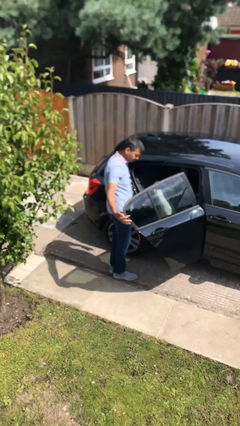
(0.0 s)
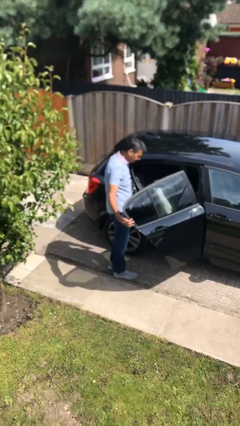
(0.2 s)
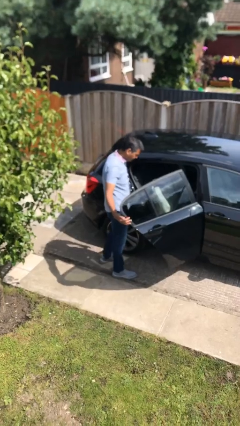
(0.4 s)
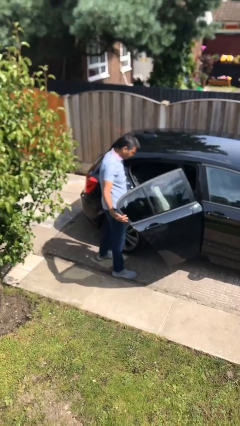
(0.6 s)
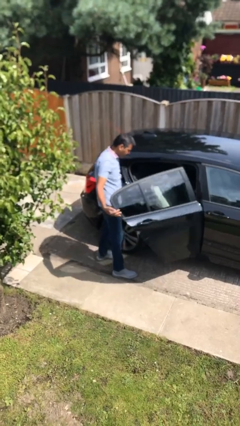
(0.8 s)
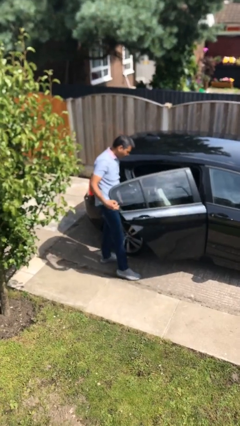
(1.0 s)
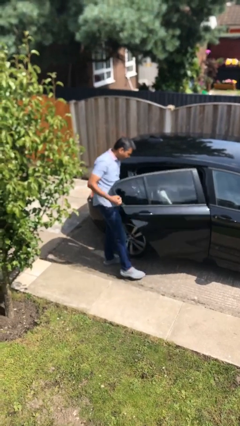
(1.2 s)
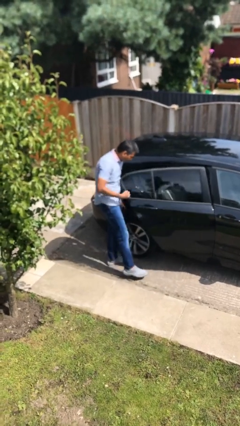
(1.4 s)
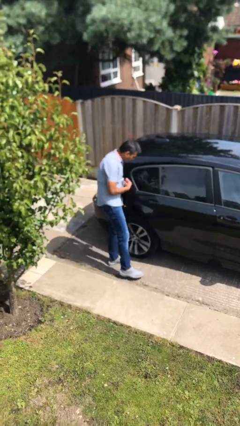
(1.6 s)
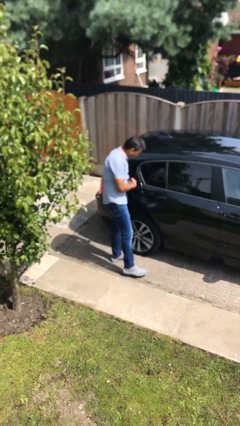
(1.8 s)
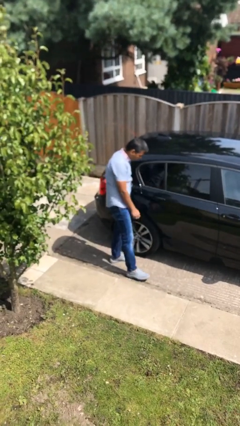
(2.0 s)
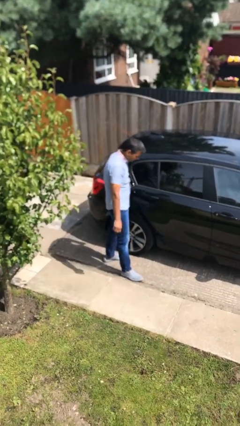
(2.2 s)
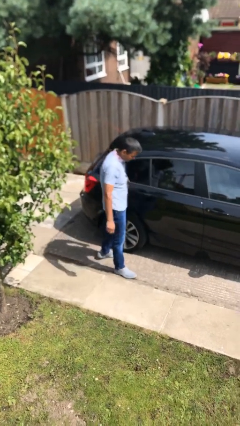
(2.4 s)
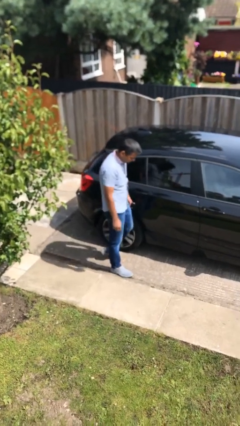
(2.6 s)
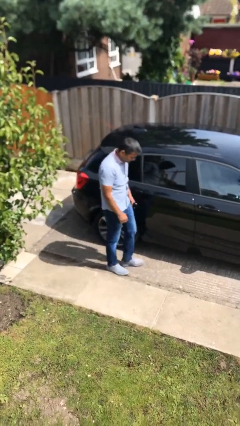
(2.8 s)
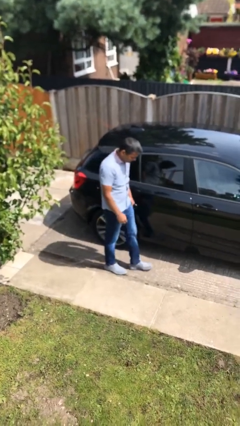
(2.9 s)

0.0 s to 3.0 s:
person closes car door

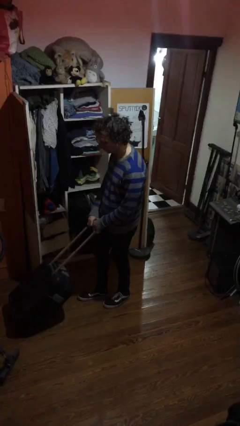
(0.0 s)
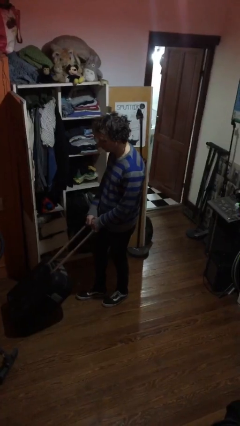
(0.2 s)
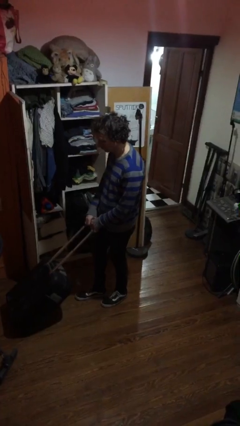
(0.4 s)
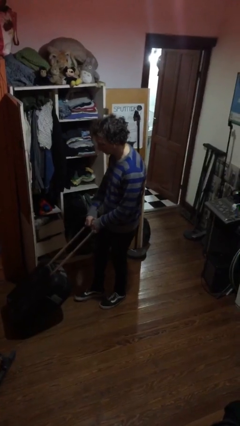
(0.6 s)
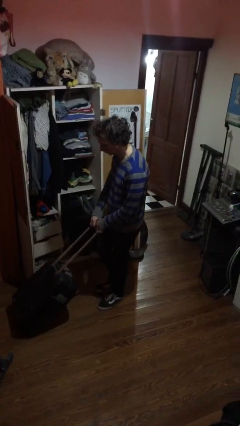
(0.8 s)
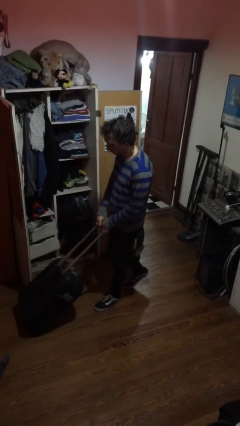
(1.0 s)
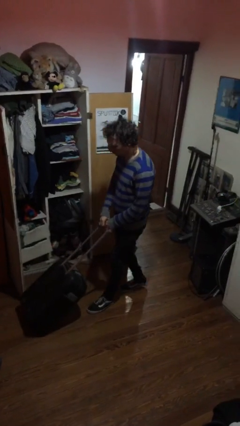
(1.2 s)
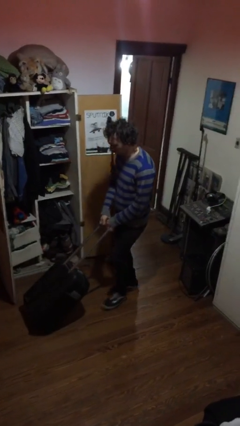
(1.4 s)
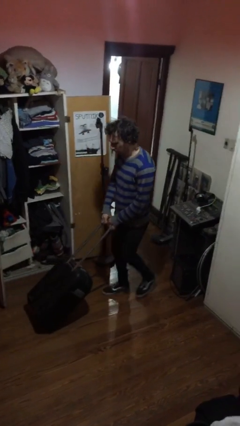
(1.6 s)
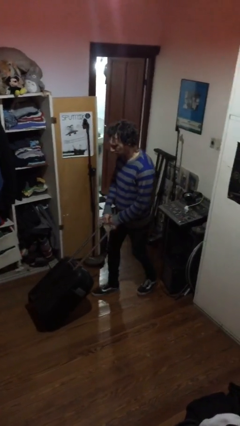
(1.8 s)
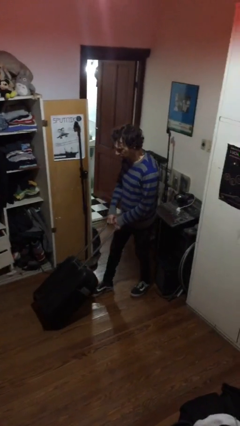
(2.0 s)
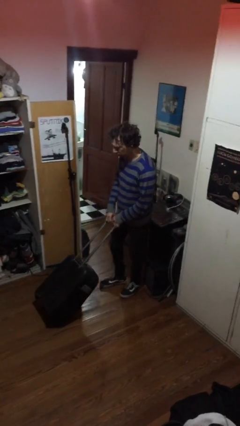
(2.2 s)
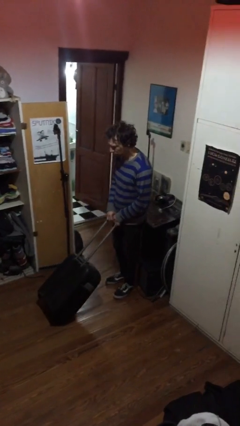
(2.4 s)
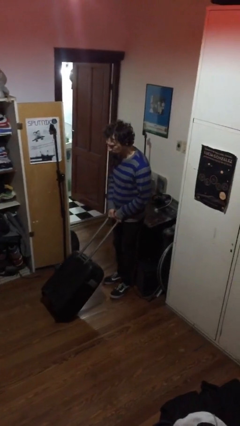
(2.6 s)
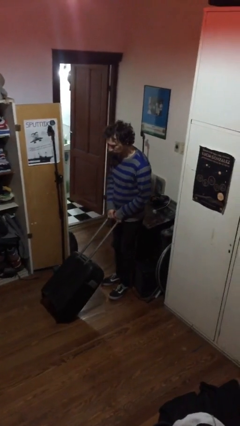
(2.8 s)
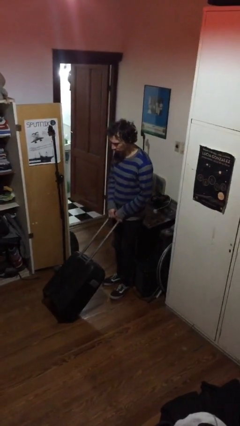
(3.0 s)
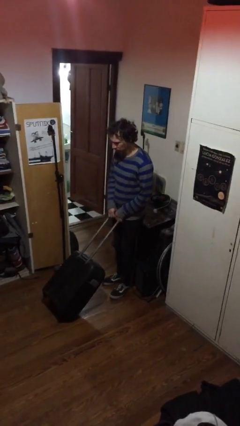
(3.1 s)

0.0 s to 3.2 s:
person pulls wheeled cart

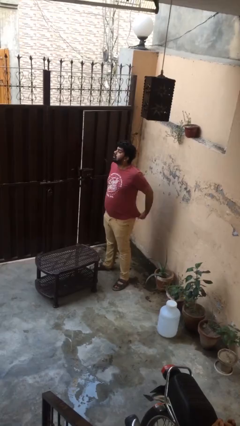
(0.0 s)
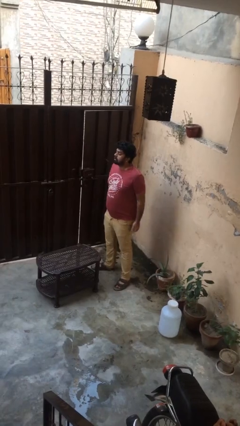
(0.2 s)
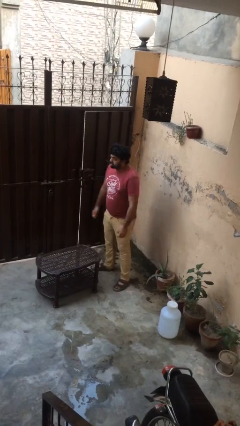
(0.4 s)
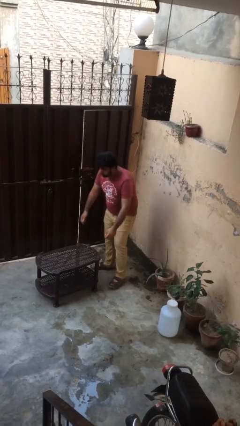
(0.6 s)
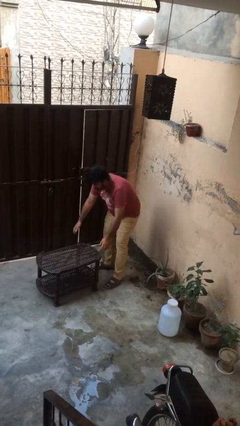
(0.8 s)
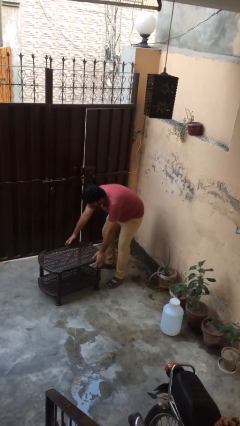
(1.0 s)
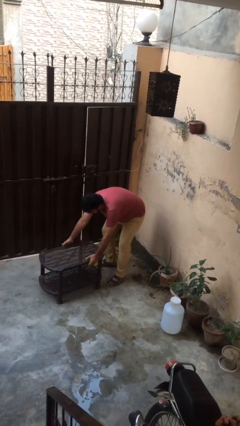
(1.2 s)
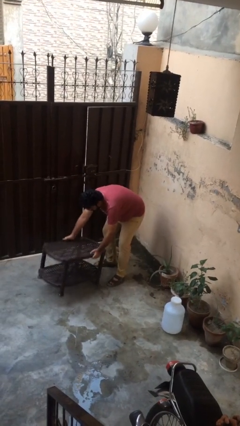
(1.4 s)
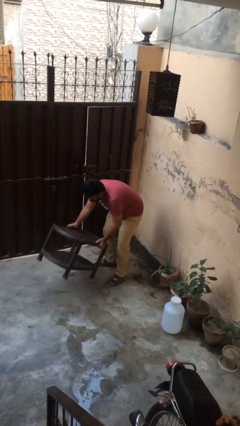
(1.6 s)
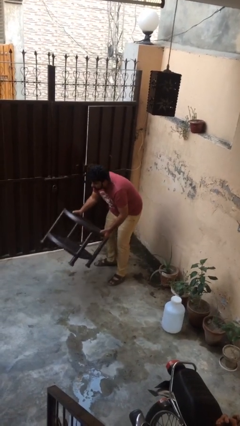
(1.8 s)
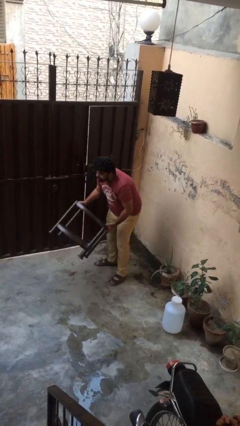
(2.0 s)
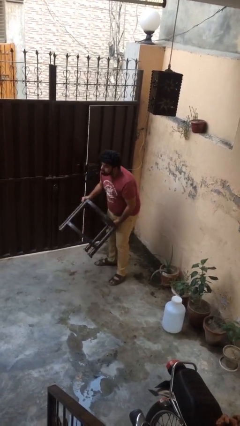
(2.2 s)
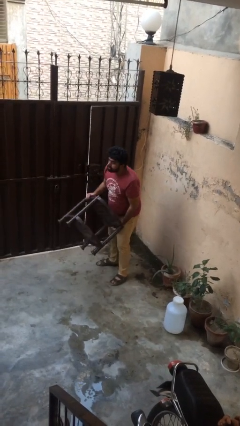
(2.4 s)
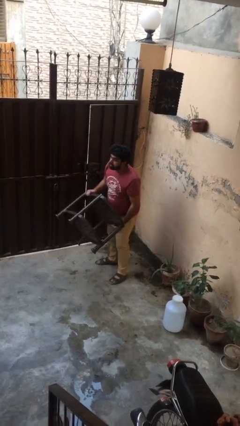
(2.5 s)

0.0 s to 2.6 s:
person picks up object from floor

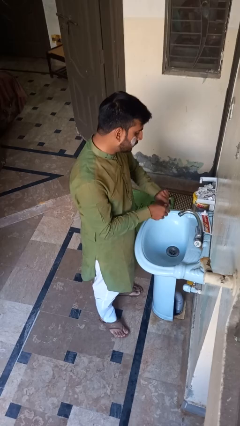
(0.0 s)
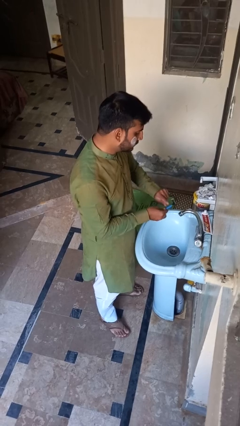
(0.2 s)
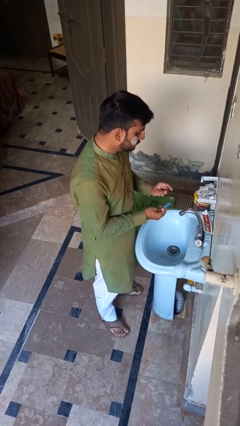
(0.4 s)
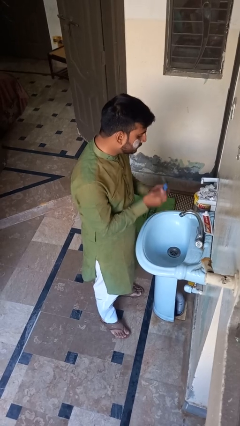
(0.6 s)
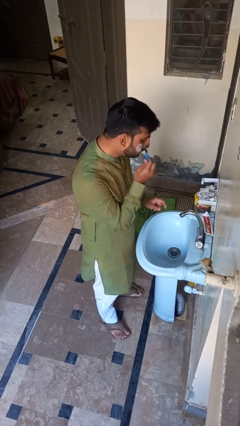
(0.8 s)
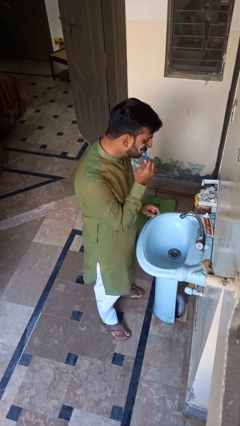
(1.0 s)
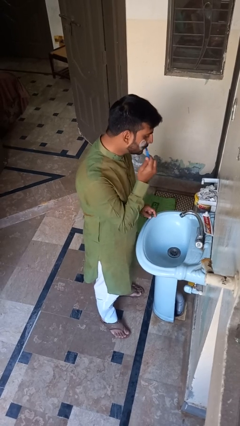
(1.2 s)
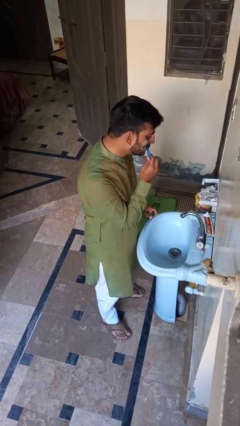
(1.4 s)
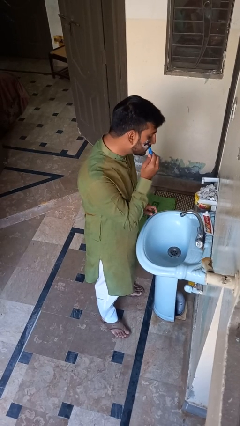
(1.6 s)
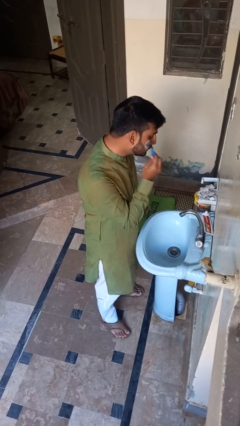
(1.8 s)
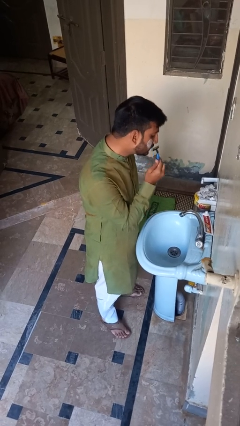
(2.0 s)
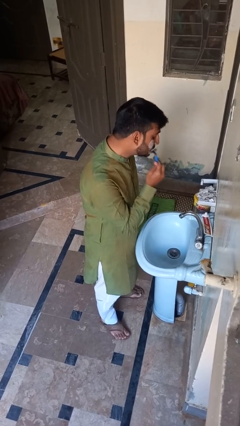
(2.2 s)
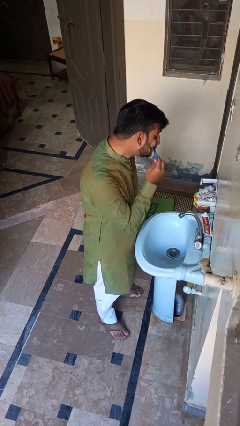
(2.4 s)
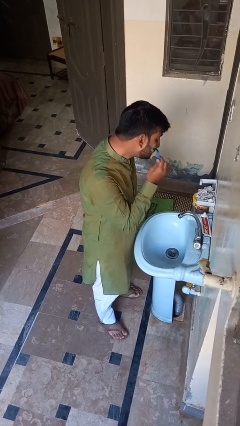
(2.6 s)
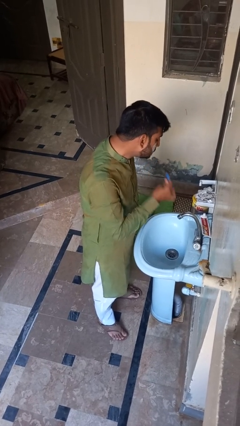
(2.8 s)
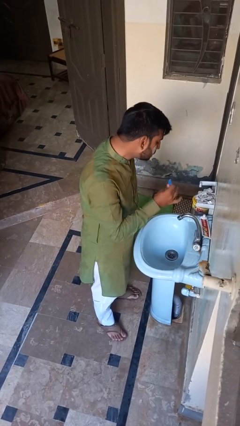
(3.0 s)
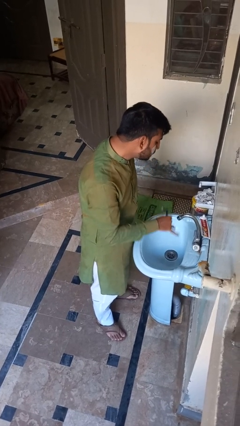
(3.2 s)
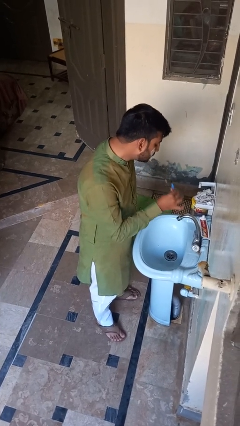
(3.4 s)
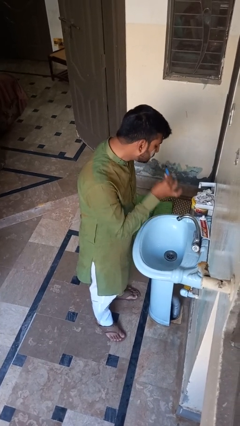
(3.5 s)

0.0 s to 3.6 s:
person shaves face

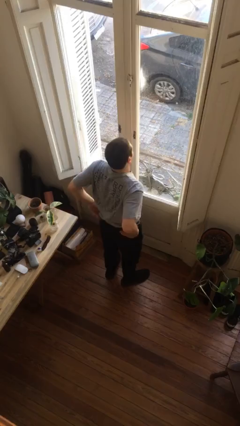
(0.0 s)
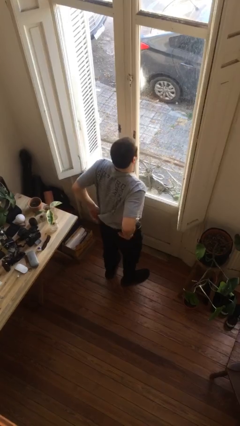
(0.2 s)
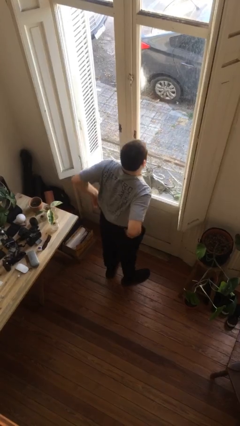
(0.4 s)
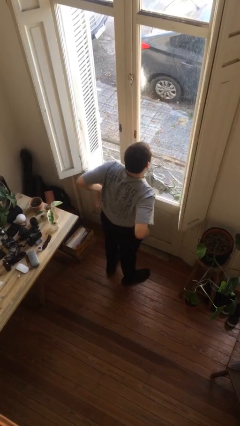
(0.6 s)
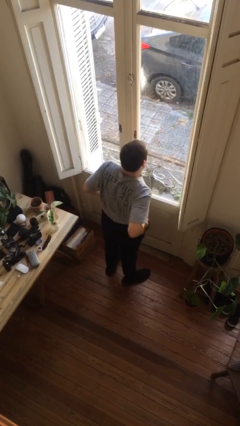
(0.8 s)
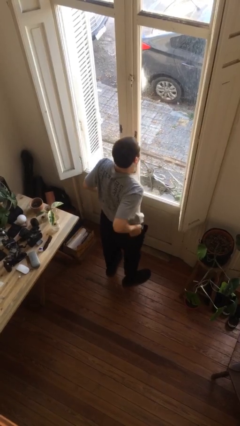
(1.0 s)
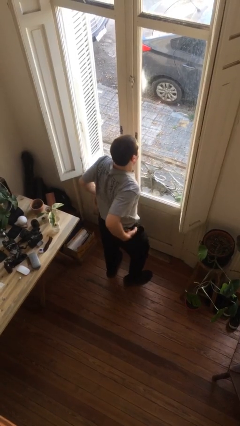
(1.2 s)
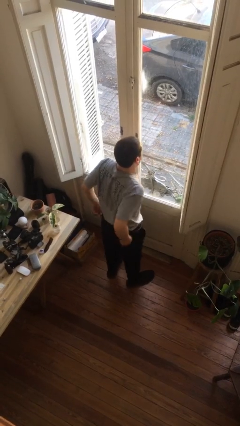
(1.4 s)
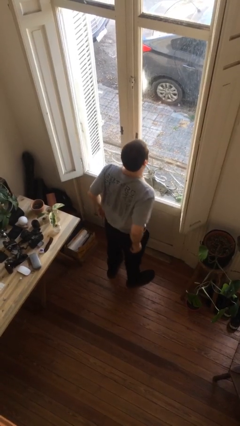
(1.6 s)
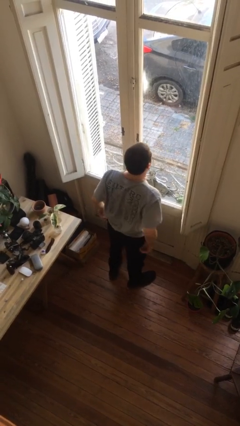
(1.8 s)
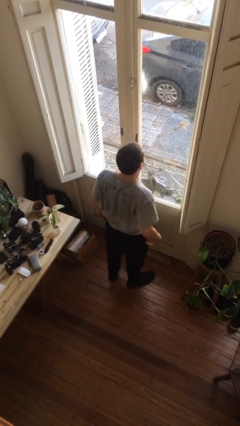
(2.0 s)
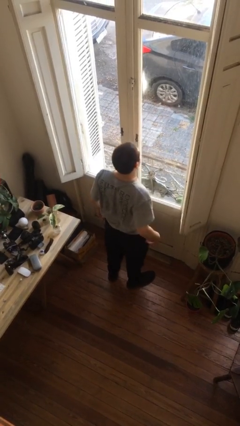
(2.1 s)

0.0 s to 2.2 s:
person hikes up pants

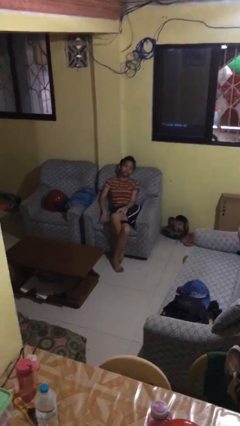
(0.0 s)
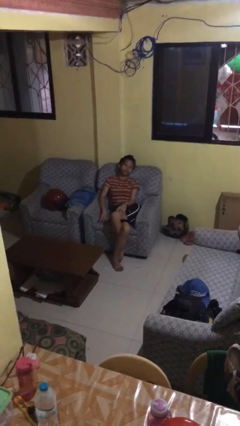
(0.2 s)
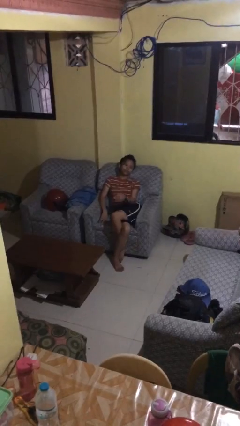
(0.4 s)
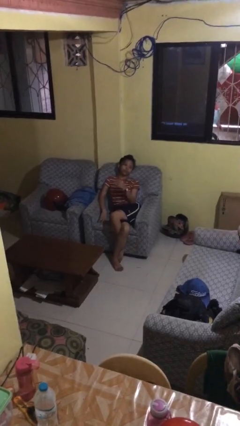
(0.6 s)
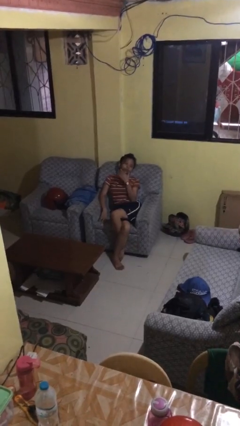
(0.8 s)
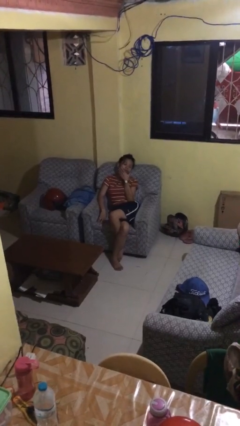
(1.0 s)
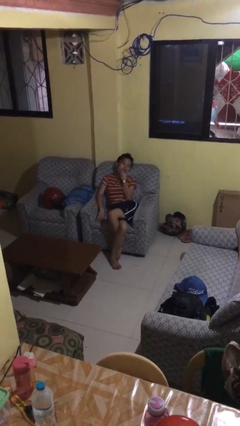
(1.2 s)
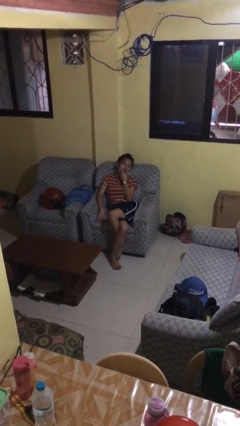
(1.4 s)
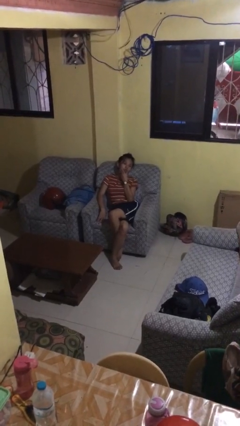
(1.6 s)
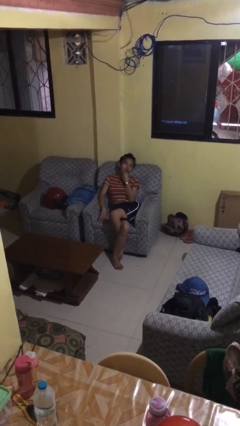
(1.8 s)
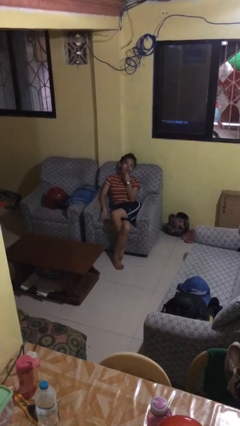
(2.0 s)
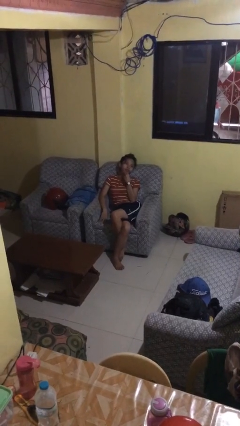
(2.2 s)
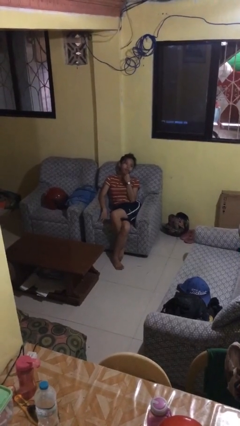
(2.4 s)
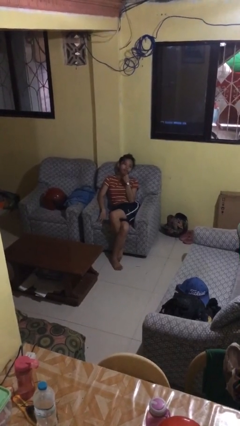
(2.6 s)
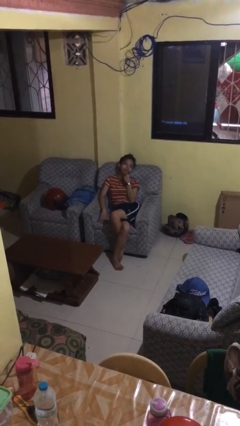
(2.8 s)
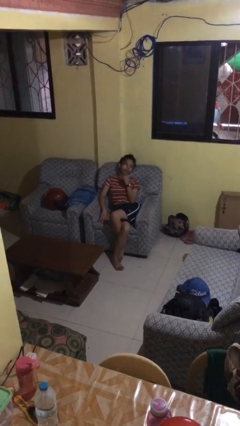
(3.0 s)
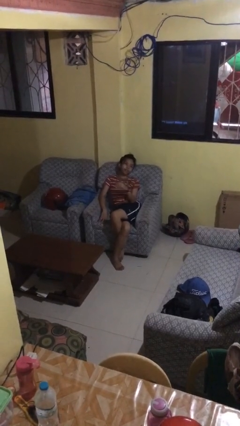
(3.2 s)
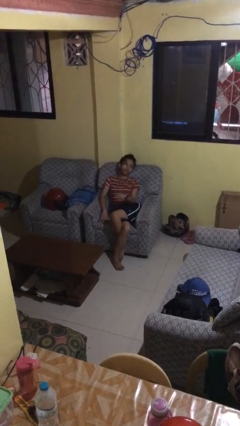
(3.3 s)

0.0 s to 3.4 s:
person strokes chin
